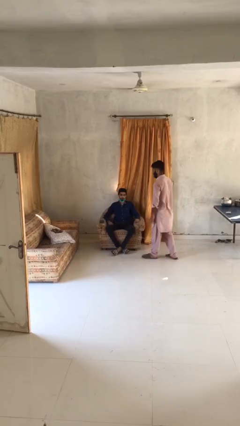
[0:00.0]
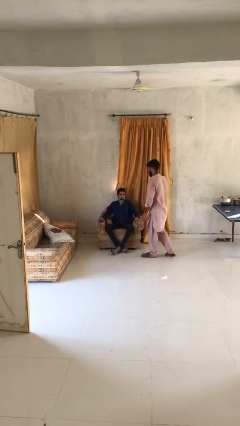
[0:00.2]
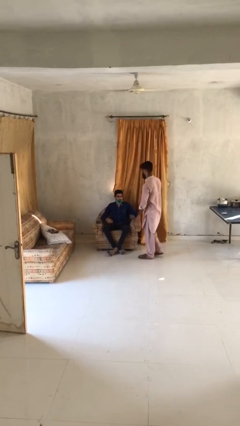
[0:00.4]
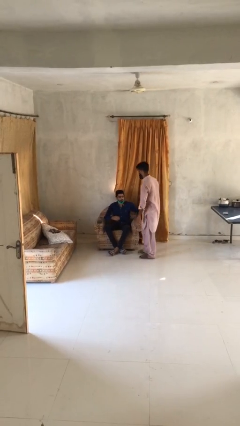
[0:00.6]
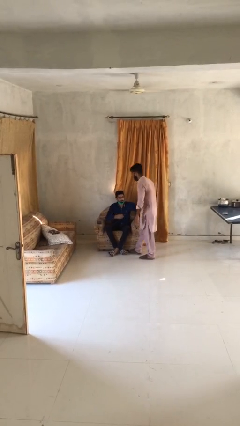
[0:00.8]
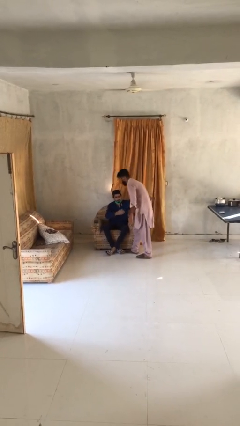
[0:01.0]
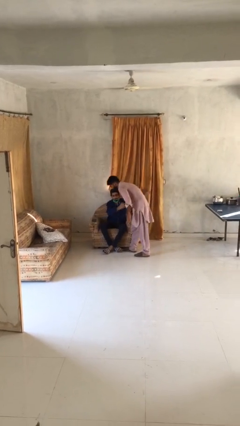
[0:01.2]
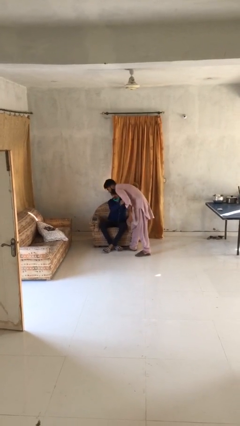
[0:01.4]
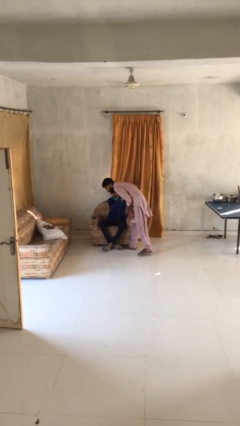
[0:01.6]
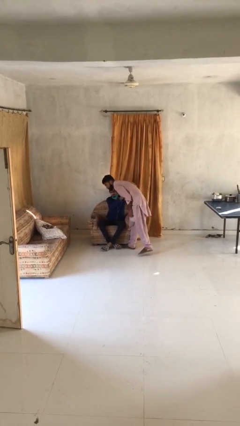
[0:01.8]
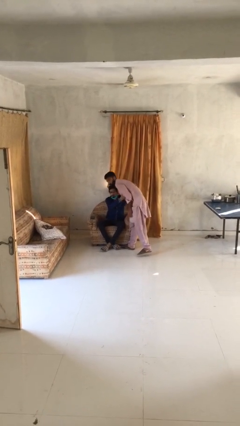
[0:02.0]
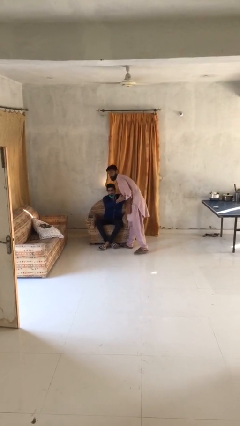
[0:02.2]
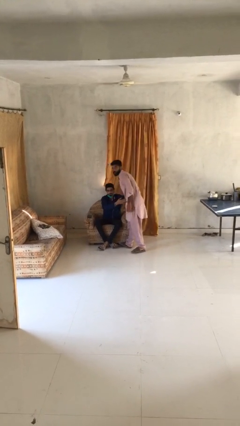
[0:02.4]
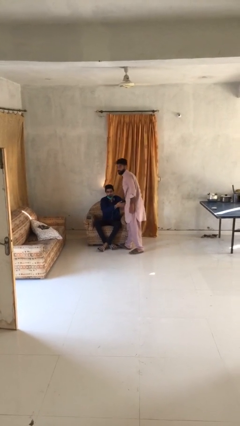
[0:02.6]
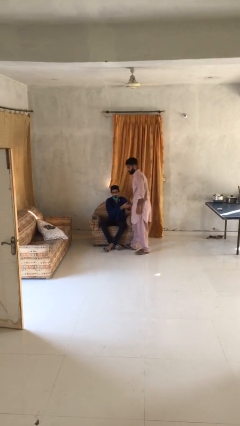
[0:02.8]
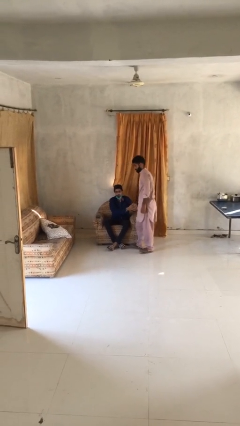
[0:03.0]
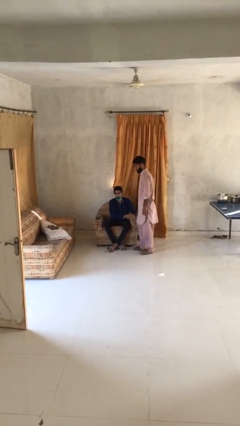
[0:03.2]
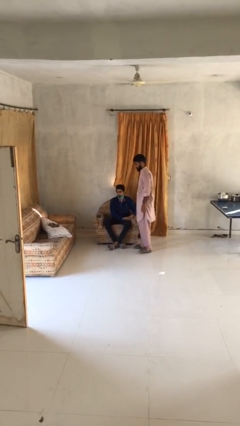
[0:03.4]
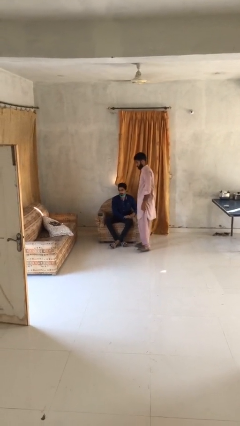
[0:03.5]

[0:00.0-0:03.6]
person embraces person

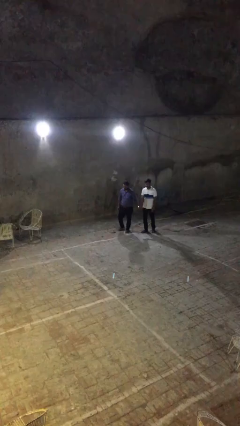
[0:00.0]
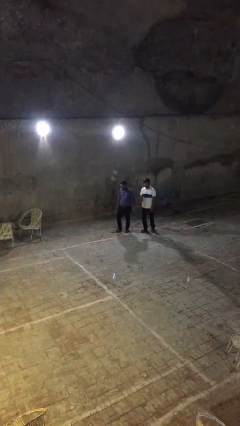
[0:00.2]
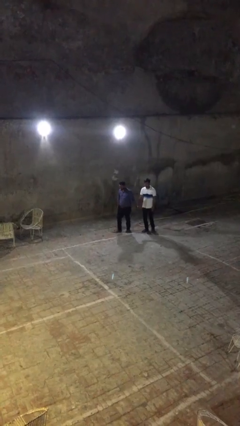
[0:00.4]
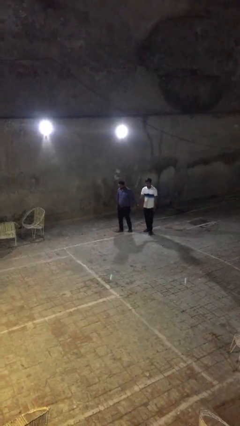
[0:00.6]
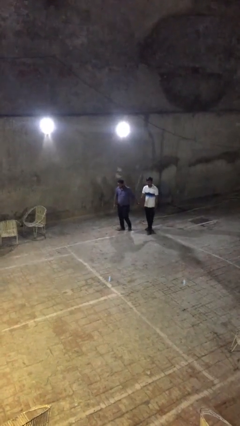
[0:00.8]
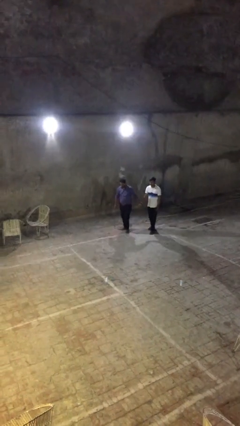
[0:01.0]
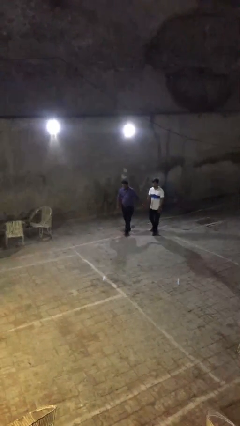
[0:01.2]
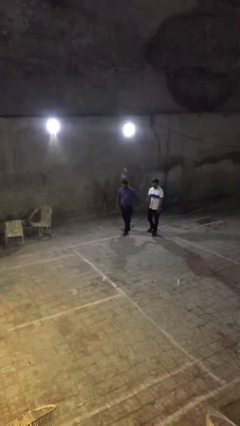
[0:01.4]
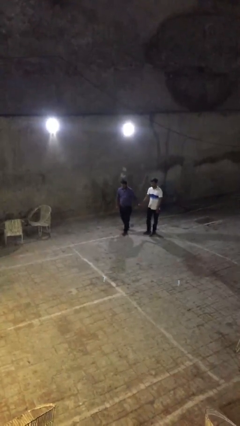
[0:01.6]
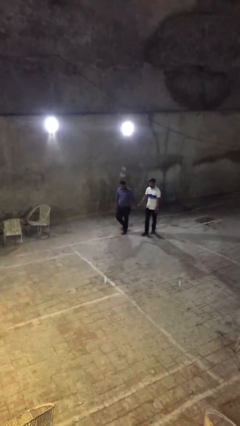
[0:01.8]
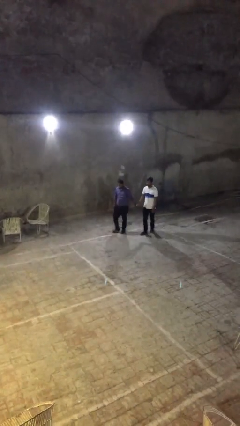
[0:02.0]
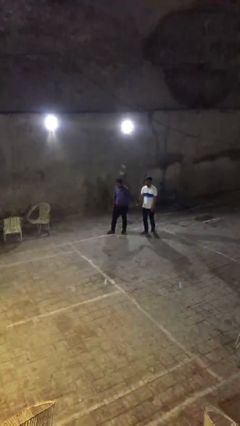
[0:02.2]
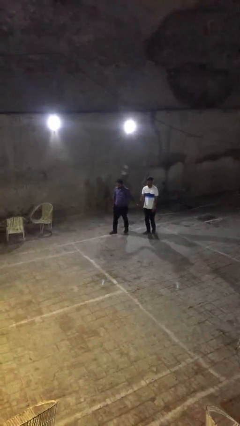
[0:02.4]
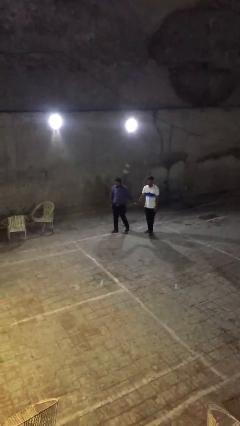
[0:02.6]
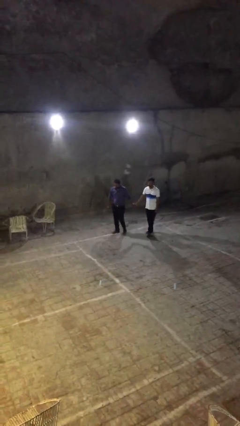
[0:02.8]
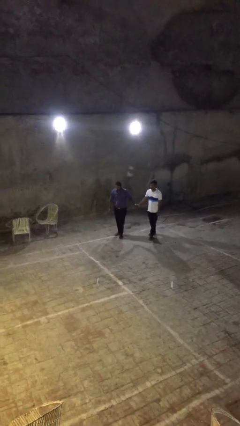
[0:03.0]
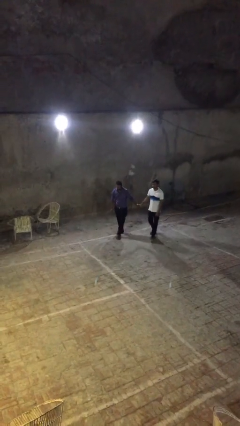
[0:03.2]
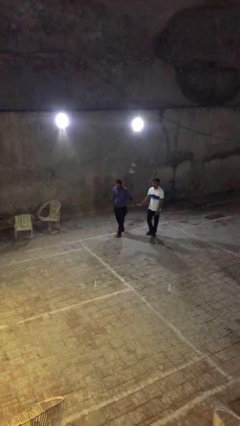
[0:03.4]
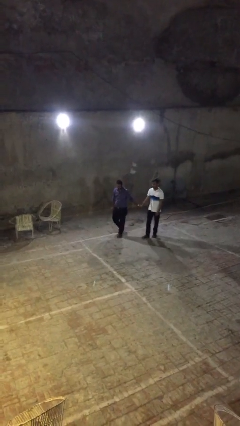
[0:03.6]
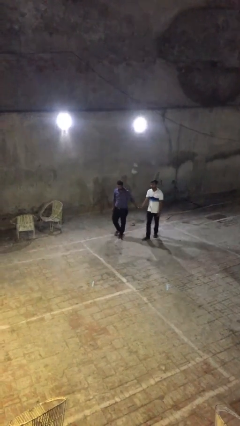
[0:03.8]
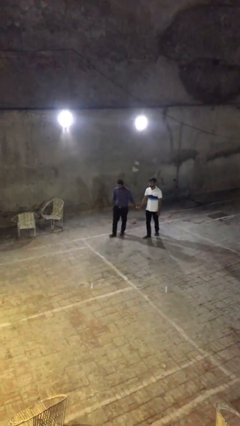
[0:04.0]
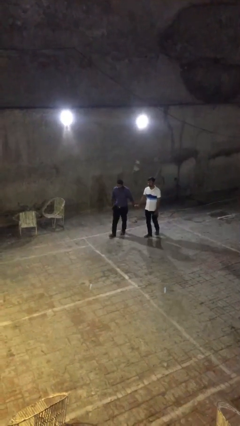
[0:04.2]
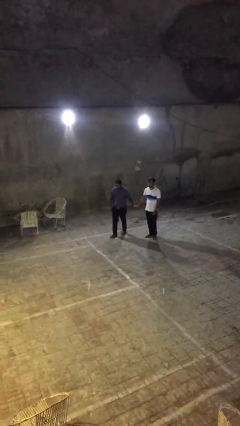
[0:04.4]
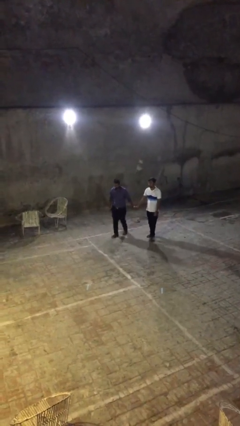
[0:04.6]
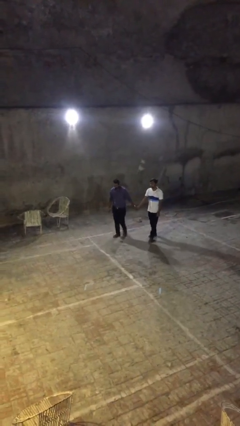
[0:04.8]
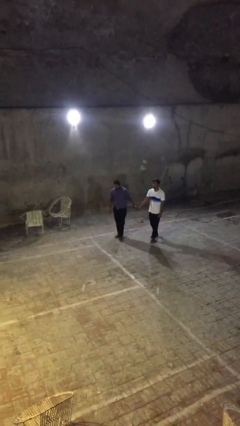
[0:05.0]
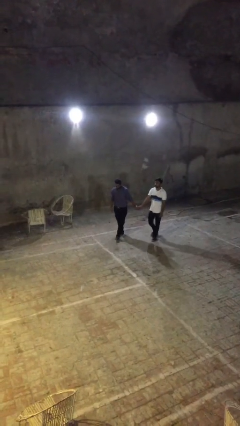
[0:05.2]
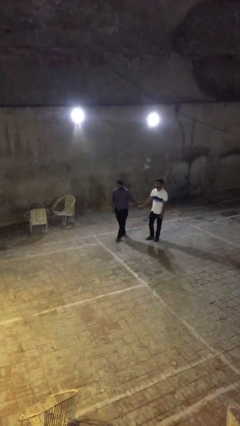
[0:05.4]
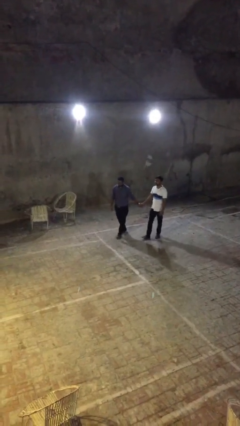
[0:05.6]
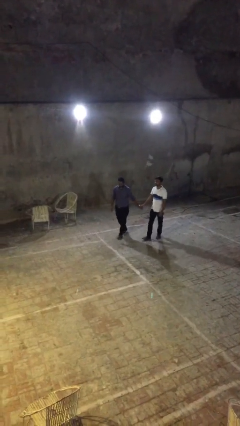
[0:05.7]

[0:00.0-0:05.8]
person holds hand

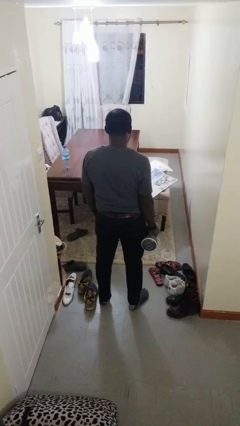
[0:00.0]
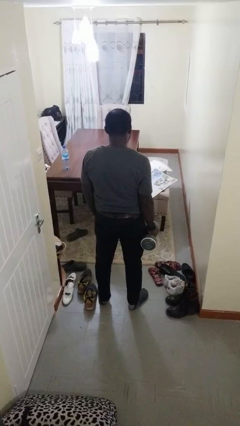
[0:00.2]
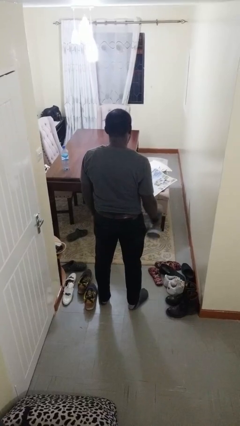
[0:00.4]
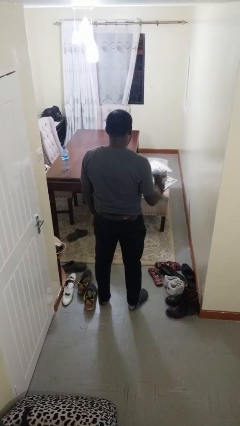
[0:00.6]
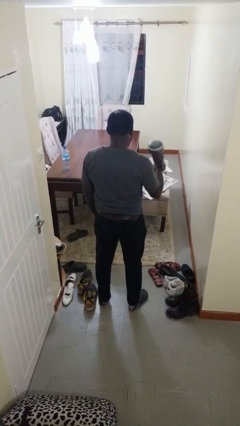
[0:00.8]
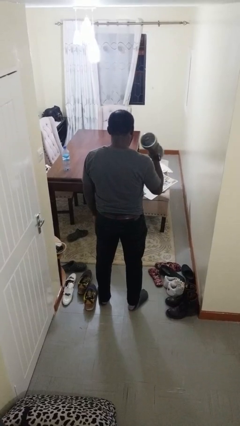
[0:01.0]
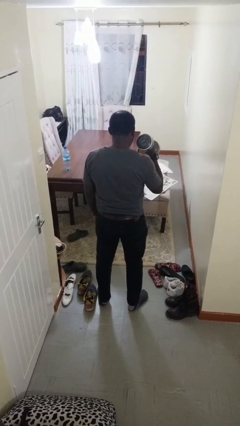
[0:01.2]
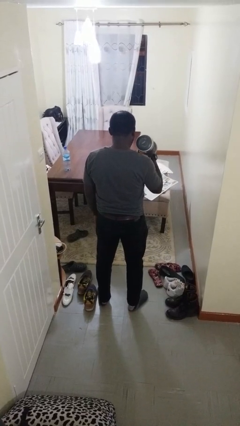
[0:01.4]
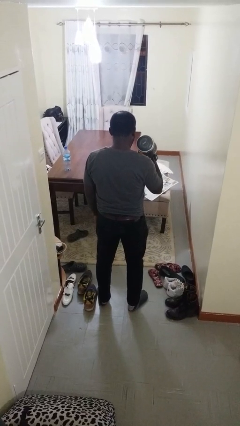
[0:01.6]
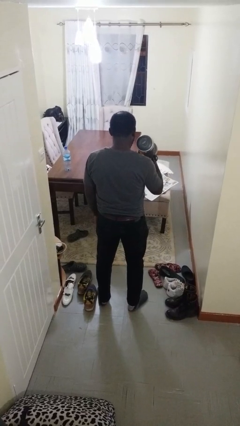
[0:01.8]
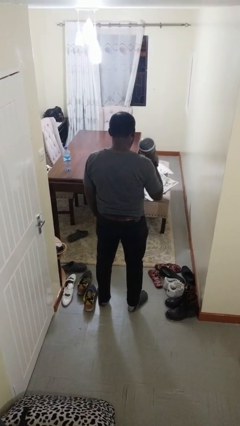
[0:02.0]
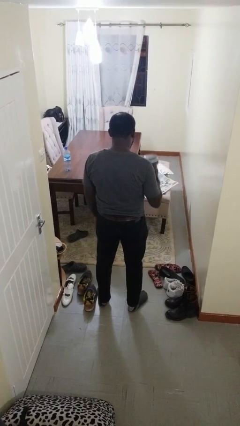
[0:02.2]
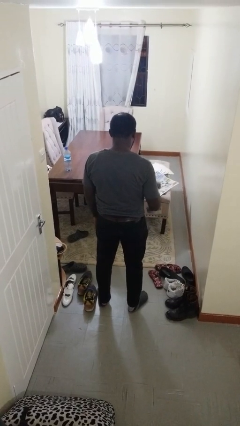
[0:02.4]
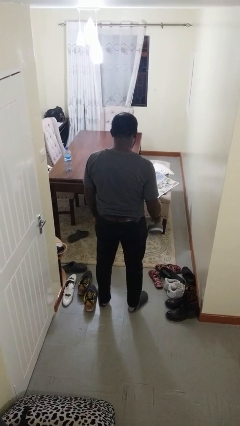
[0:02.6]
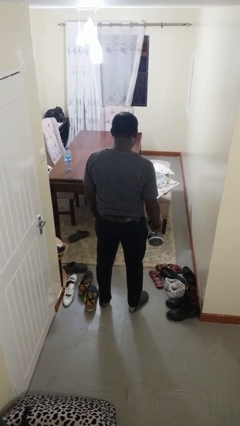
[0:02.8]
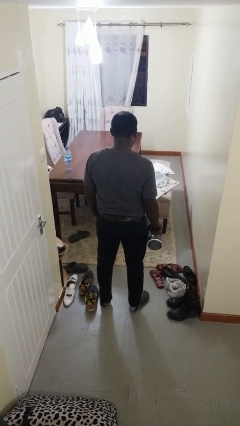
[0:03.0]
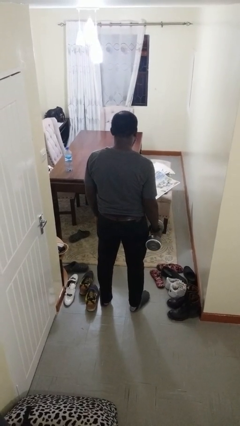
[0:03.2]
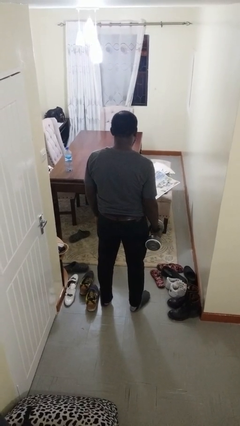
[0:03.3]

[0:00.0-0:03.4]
person lifts dumbbells

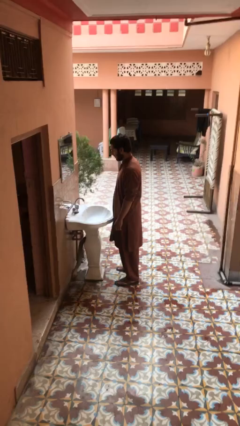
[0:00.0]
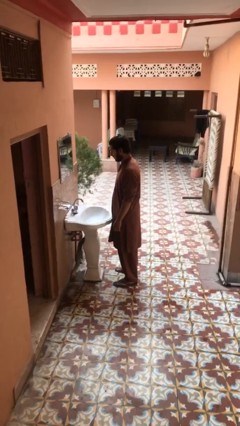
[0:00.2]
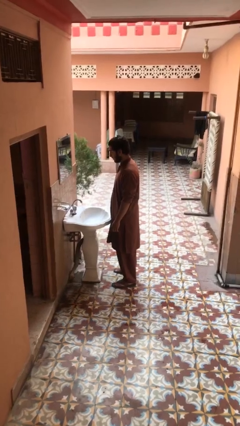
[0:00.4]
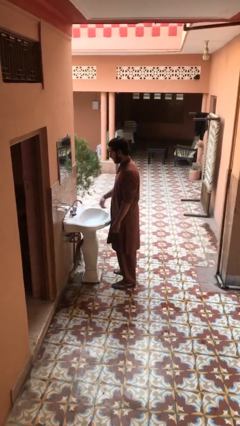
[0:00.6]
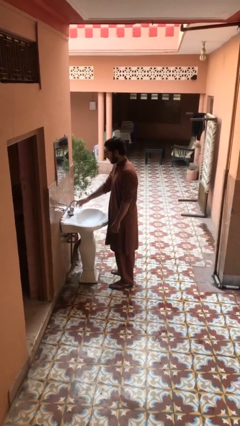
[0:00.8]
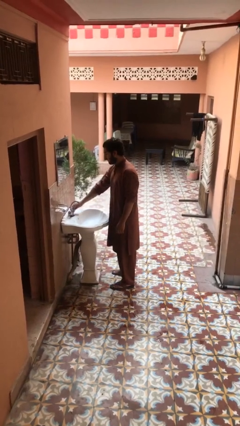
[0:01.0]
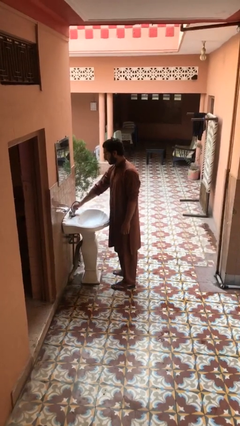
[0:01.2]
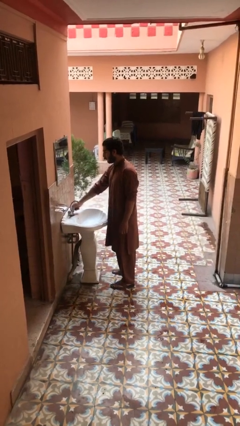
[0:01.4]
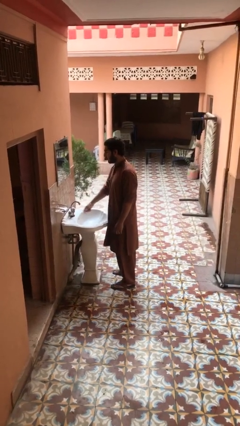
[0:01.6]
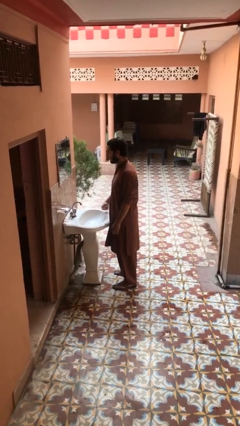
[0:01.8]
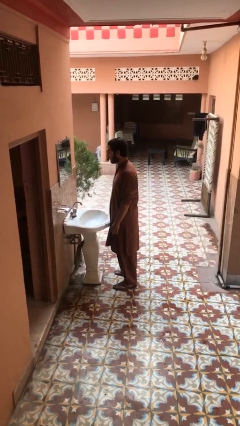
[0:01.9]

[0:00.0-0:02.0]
person turns off faucet

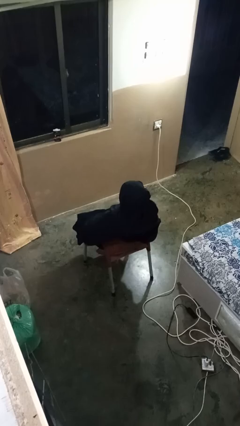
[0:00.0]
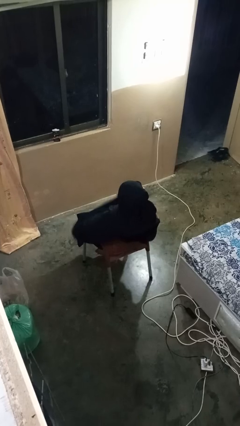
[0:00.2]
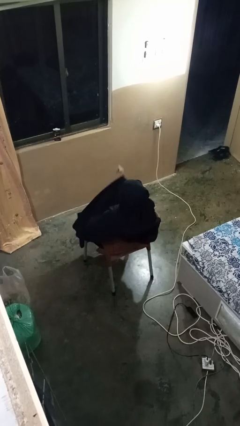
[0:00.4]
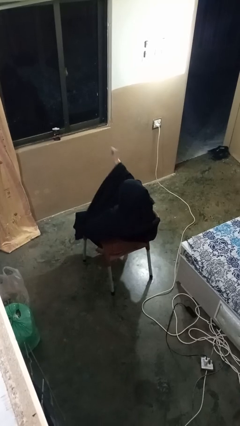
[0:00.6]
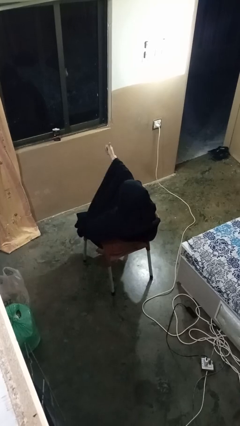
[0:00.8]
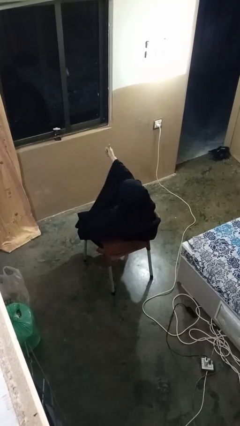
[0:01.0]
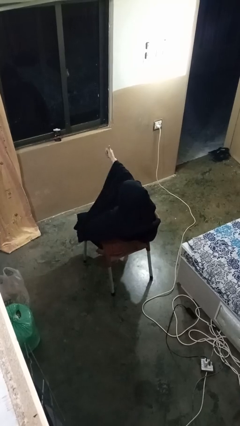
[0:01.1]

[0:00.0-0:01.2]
person gestures thumbs up

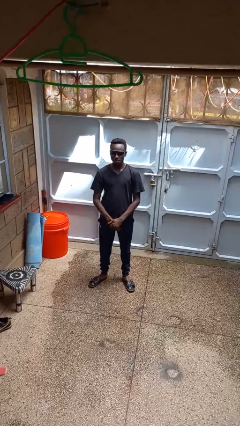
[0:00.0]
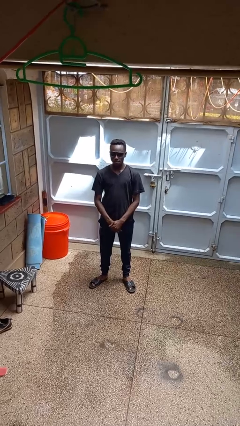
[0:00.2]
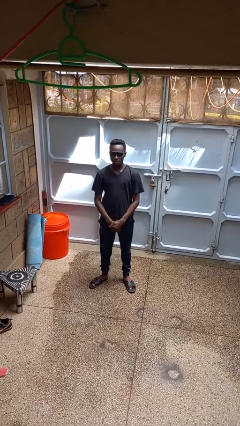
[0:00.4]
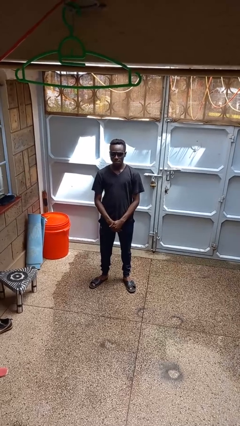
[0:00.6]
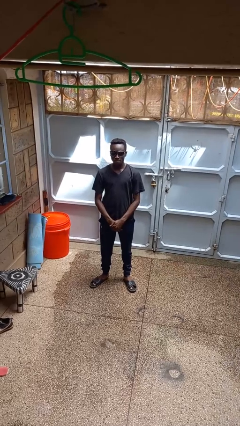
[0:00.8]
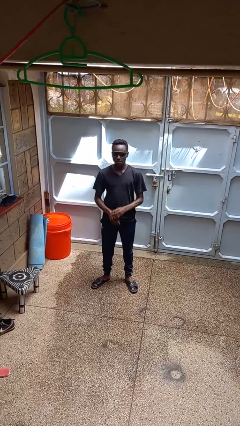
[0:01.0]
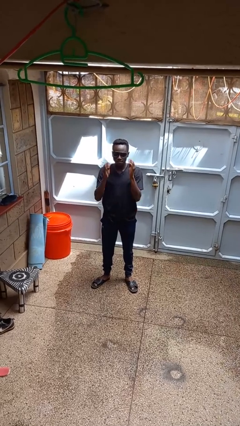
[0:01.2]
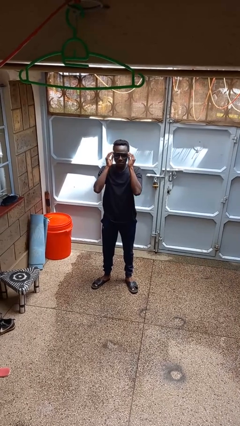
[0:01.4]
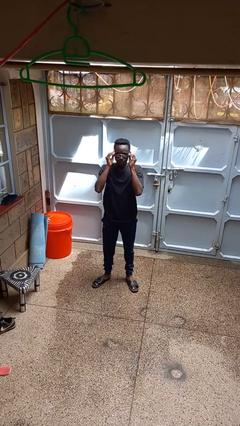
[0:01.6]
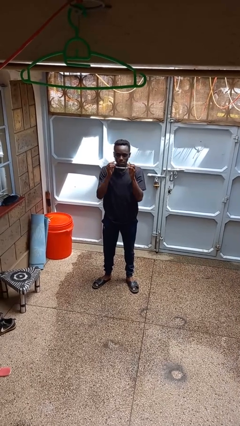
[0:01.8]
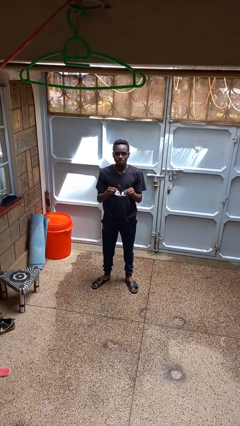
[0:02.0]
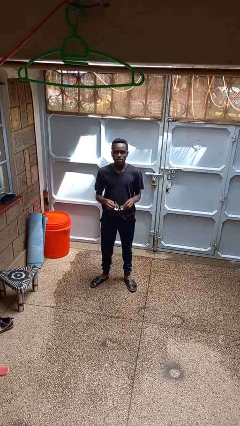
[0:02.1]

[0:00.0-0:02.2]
person takes off sunglasses
